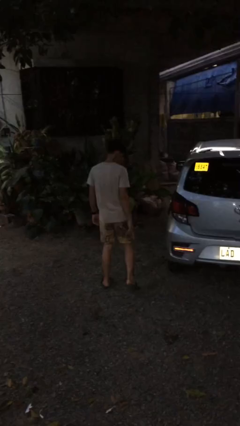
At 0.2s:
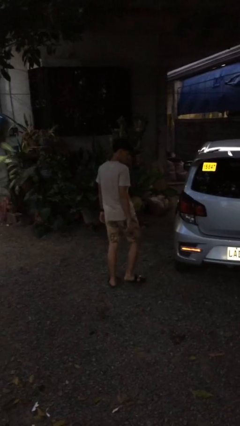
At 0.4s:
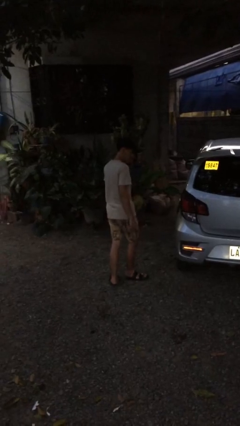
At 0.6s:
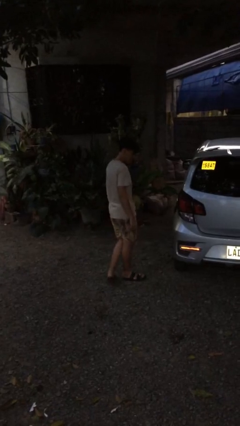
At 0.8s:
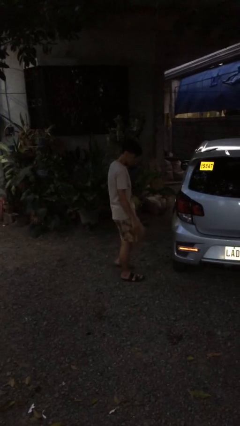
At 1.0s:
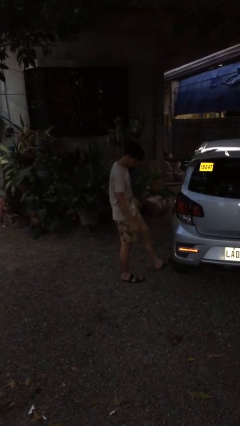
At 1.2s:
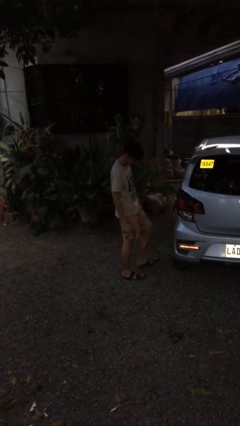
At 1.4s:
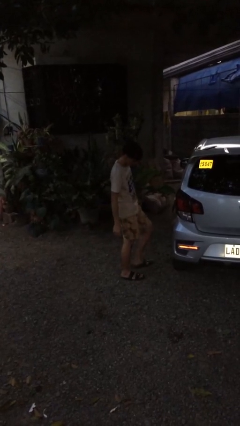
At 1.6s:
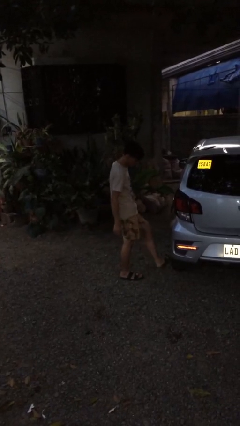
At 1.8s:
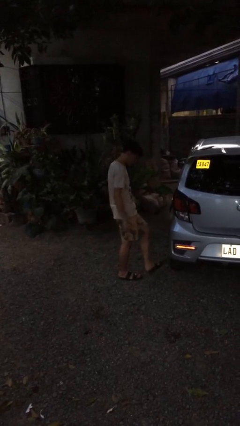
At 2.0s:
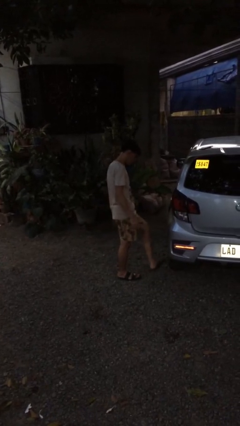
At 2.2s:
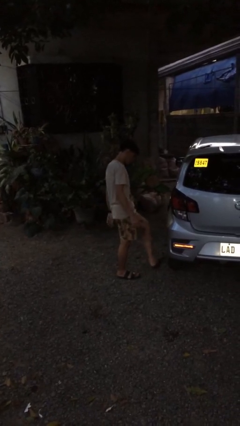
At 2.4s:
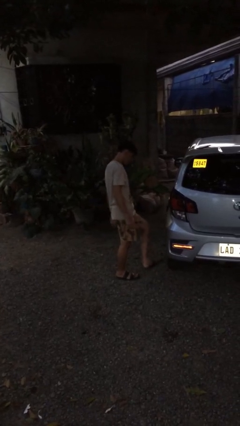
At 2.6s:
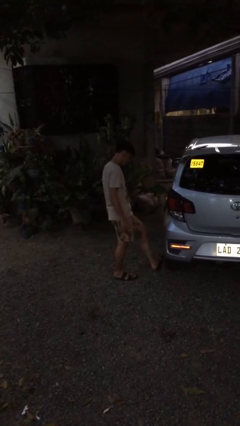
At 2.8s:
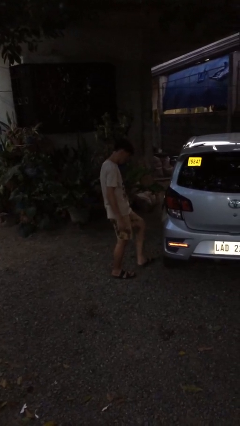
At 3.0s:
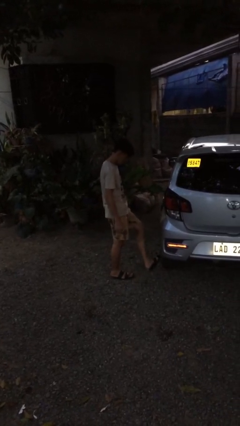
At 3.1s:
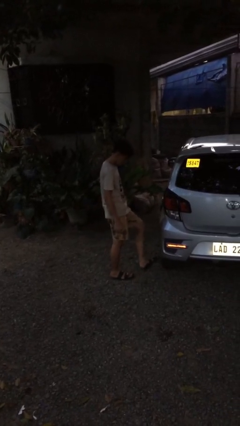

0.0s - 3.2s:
person kicks car tires

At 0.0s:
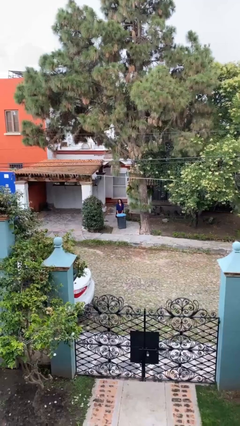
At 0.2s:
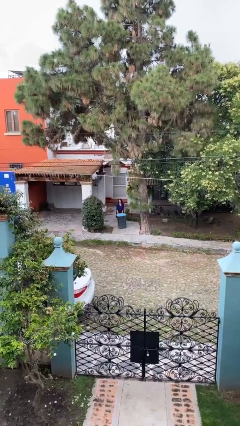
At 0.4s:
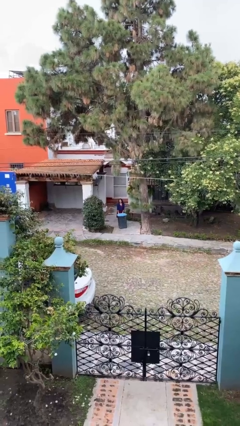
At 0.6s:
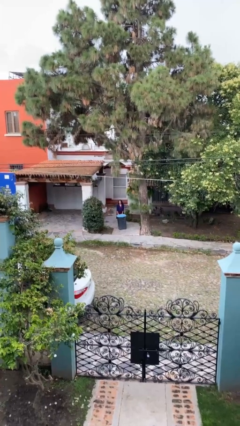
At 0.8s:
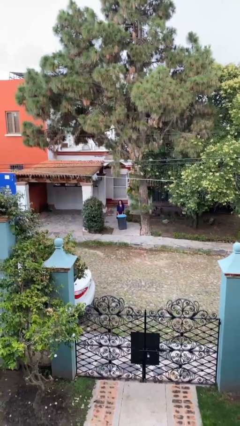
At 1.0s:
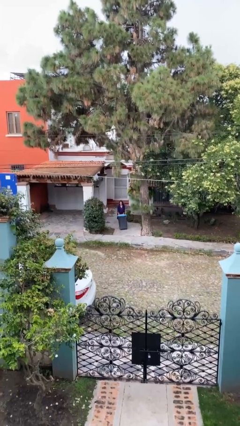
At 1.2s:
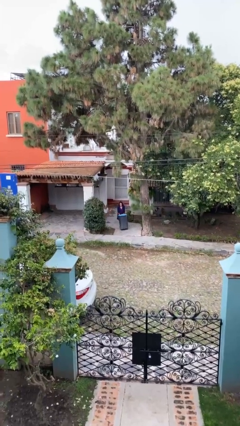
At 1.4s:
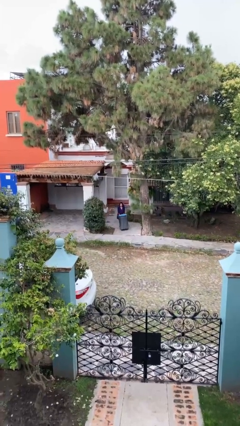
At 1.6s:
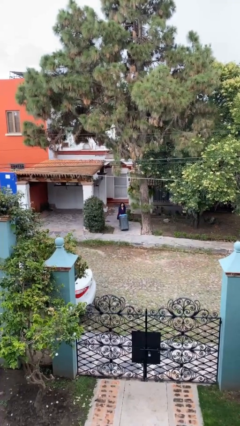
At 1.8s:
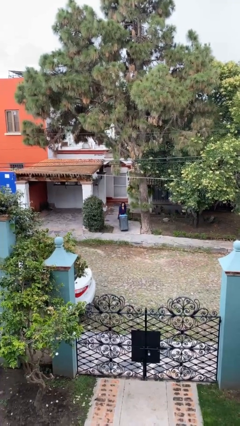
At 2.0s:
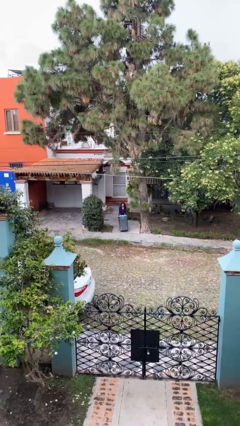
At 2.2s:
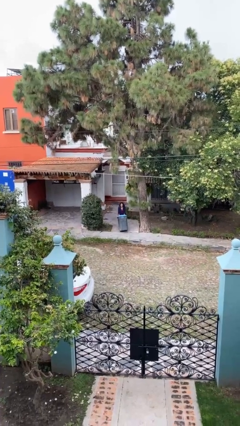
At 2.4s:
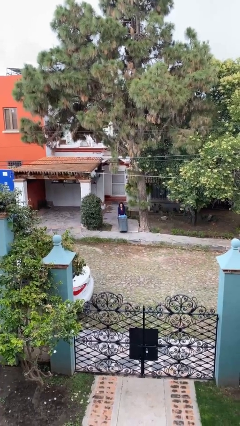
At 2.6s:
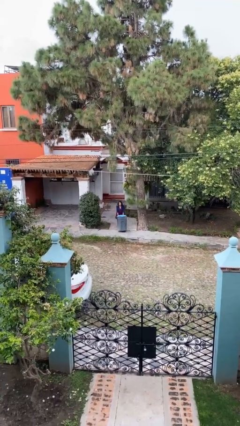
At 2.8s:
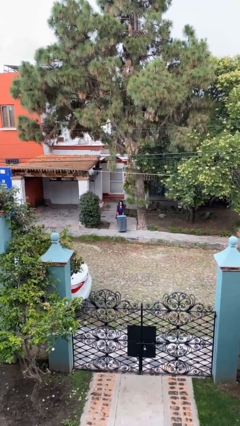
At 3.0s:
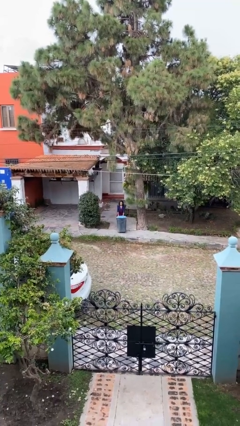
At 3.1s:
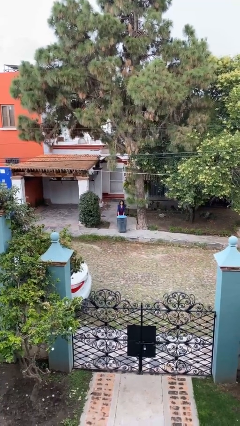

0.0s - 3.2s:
person pushes wheeled trashcan

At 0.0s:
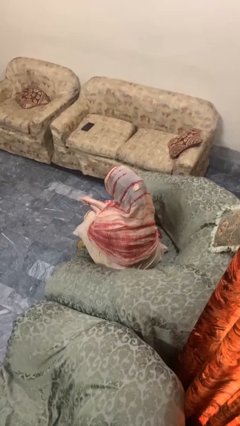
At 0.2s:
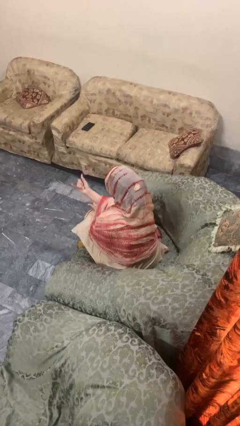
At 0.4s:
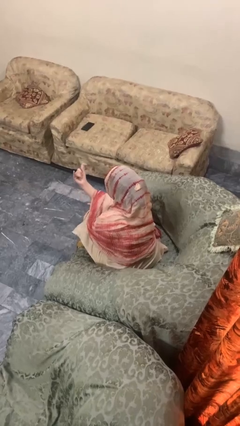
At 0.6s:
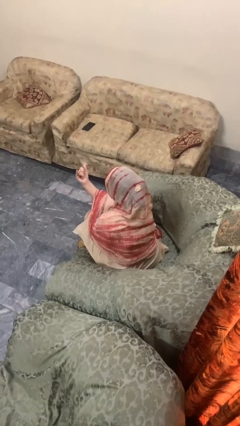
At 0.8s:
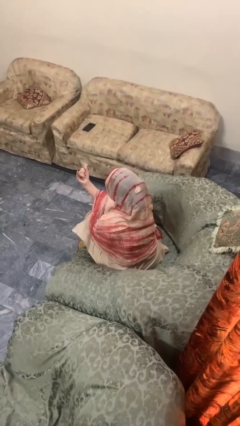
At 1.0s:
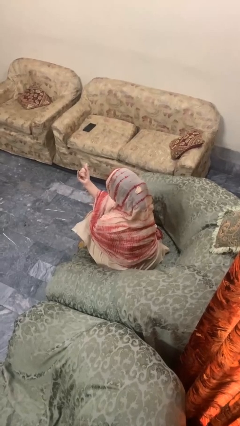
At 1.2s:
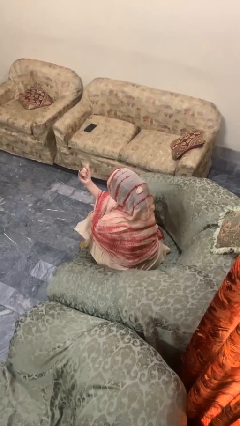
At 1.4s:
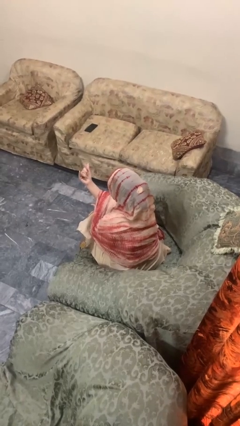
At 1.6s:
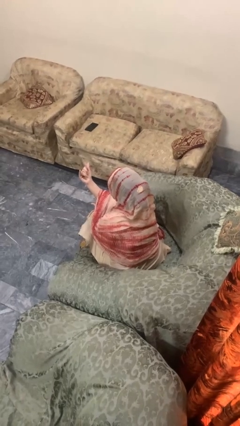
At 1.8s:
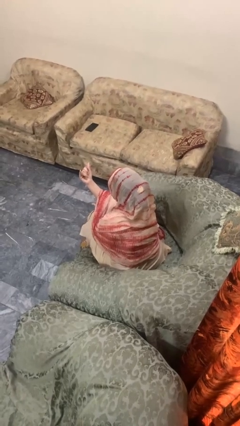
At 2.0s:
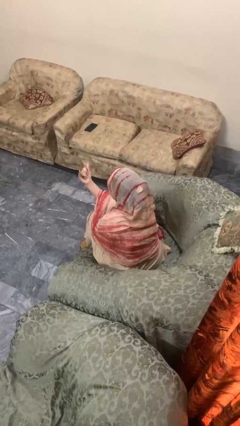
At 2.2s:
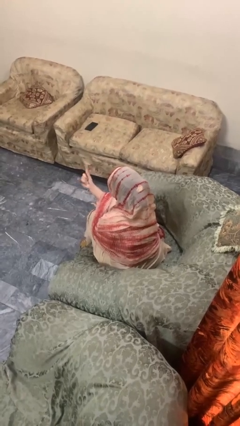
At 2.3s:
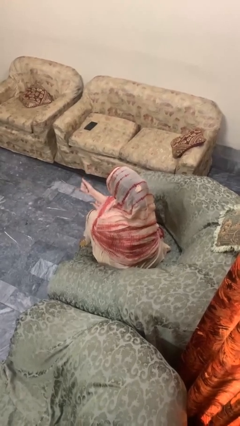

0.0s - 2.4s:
person gestures hang loose

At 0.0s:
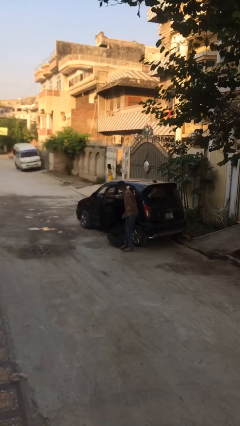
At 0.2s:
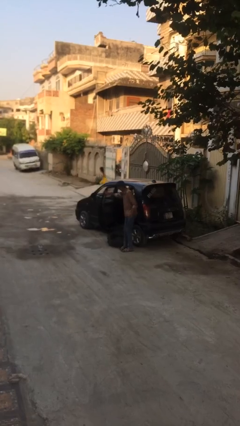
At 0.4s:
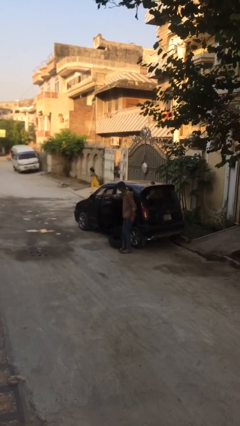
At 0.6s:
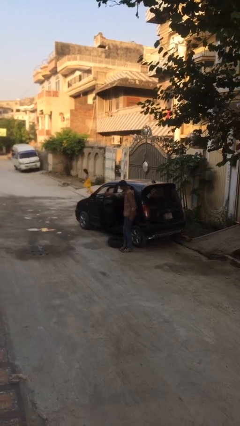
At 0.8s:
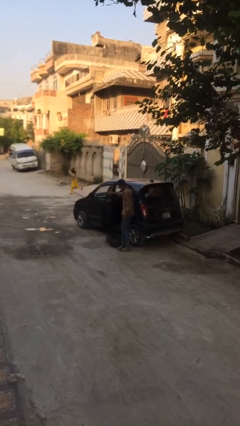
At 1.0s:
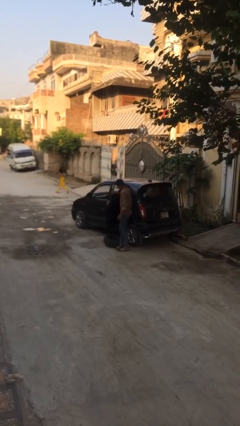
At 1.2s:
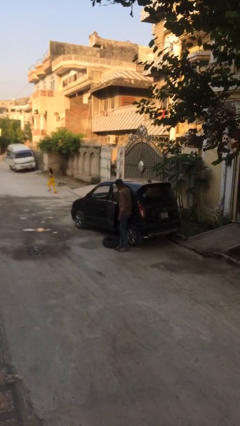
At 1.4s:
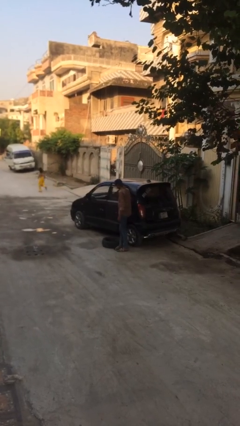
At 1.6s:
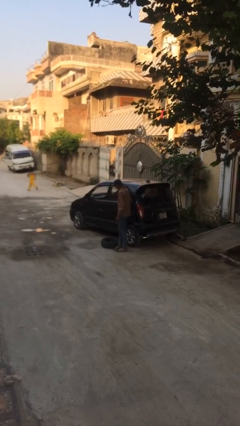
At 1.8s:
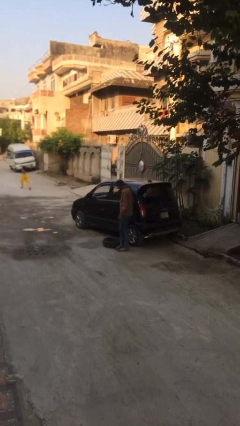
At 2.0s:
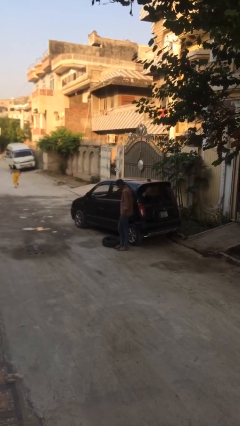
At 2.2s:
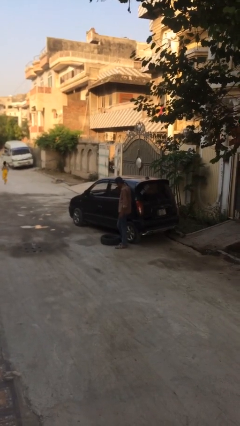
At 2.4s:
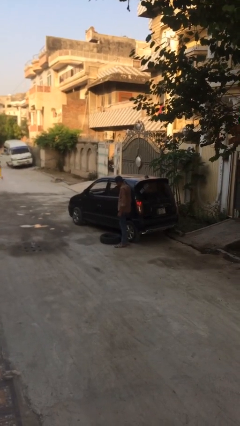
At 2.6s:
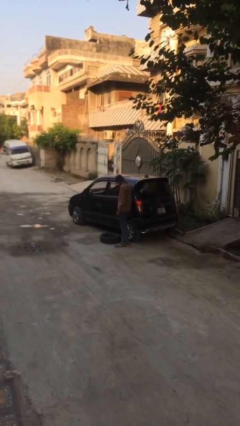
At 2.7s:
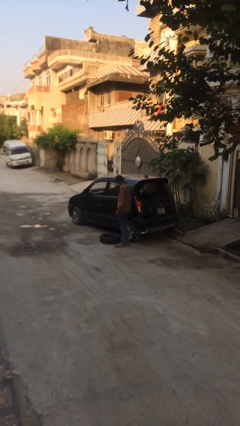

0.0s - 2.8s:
person closes car door

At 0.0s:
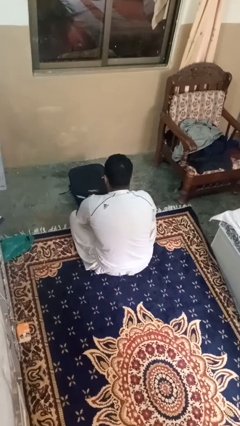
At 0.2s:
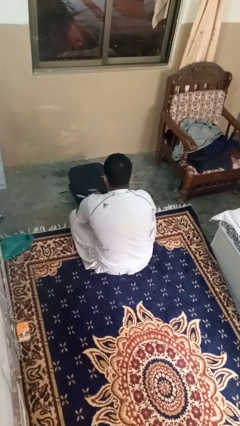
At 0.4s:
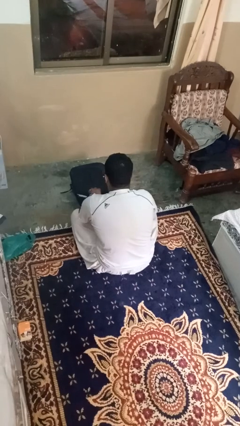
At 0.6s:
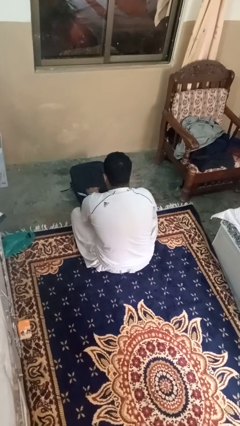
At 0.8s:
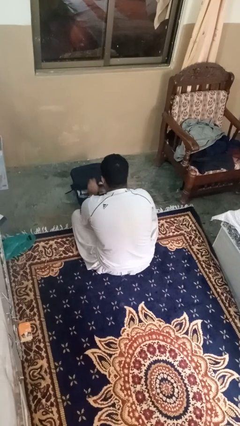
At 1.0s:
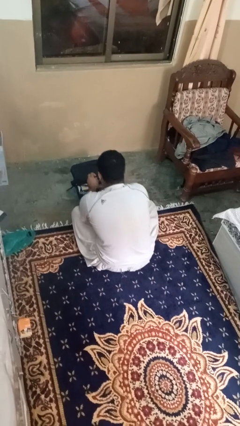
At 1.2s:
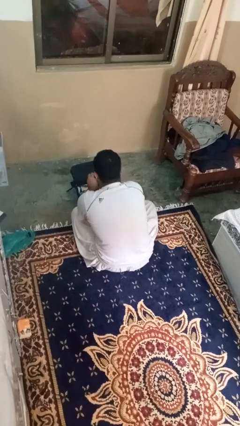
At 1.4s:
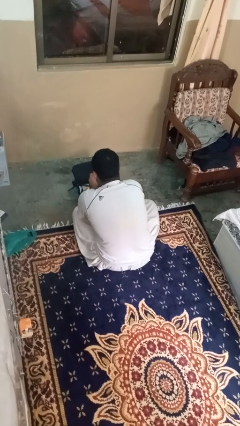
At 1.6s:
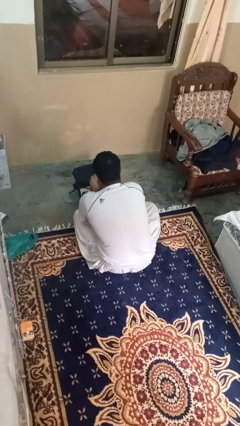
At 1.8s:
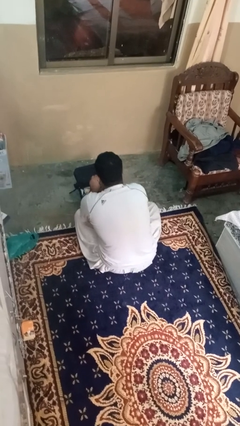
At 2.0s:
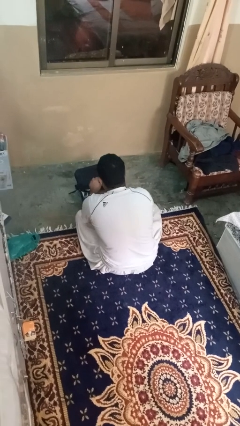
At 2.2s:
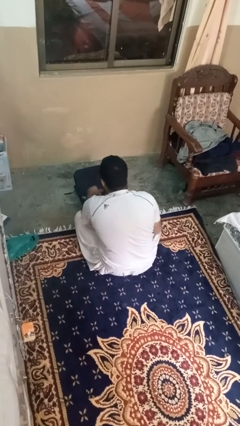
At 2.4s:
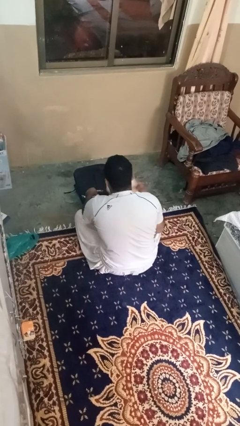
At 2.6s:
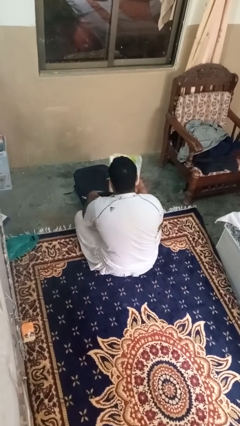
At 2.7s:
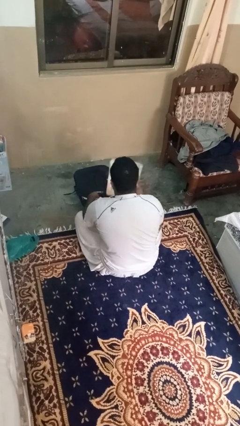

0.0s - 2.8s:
person takes object from bag

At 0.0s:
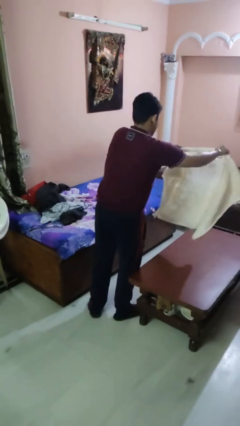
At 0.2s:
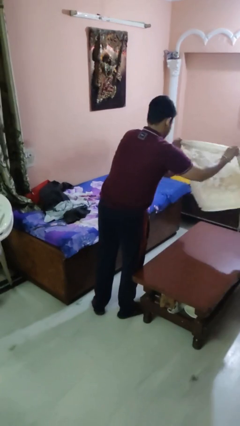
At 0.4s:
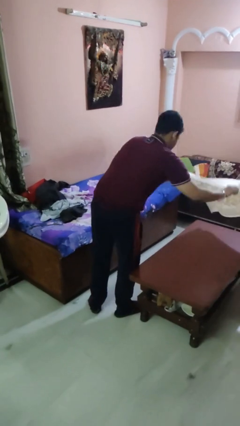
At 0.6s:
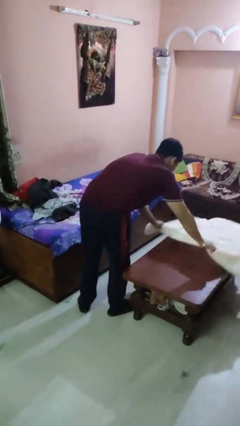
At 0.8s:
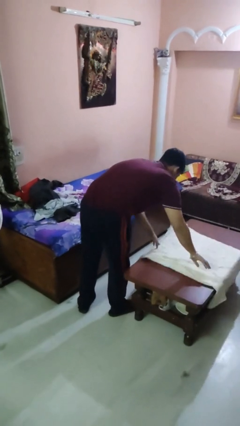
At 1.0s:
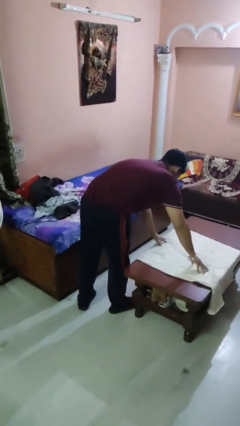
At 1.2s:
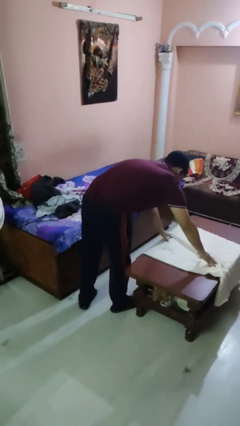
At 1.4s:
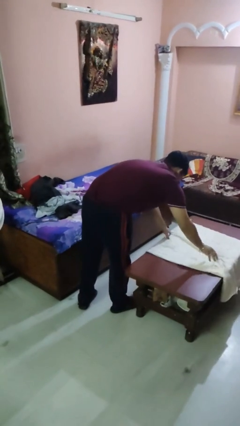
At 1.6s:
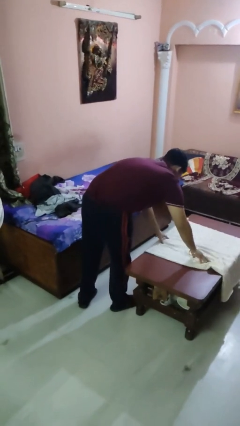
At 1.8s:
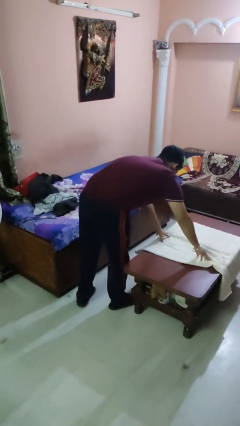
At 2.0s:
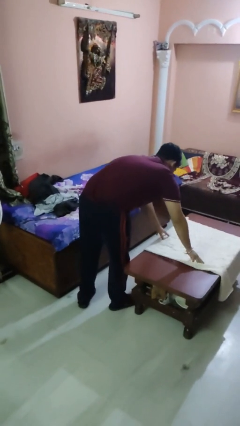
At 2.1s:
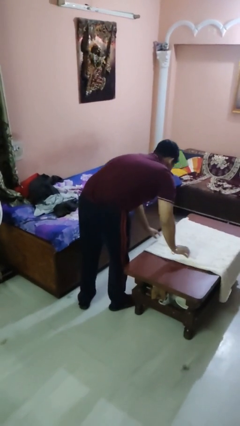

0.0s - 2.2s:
person spreads tablecloth

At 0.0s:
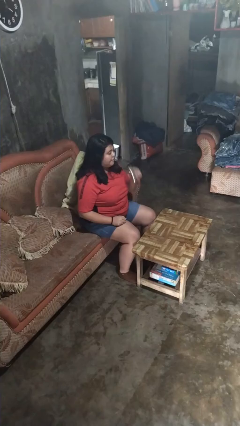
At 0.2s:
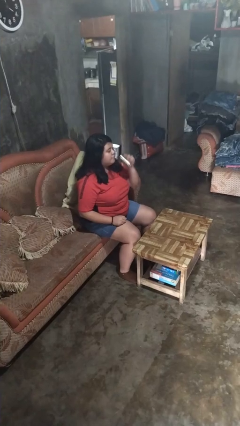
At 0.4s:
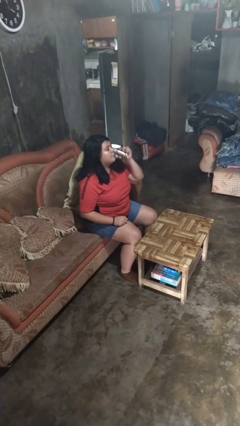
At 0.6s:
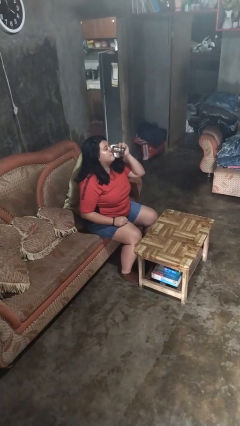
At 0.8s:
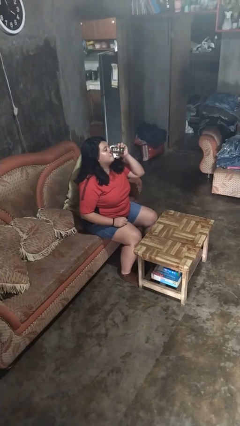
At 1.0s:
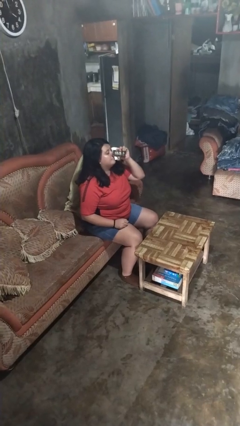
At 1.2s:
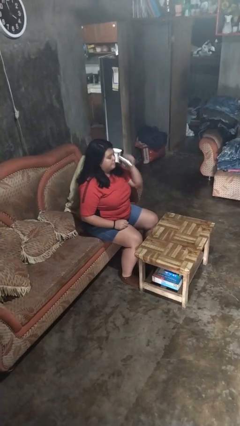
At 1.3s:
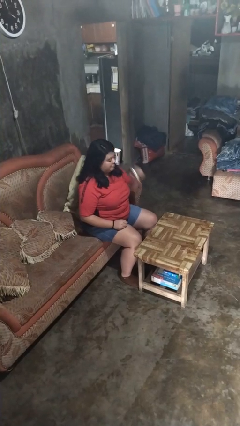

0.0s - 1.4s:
person drinks from beverage can
